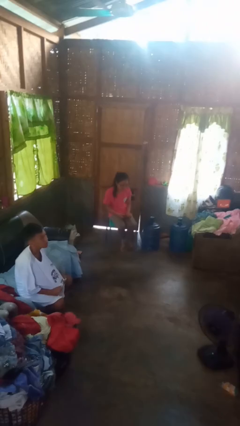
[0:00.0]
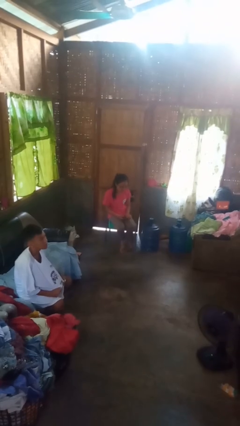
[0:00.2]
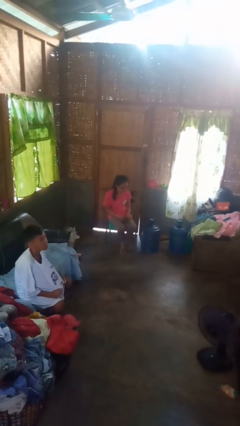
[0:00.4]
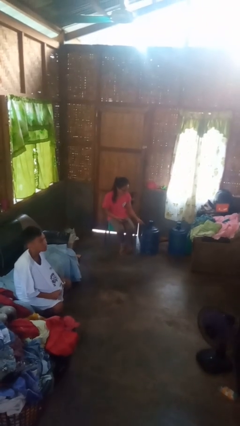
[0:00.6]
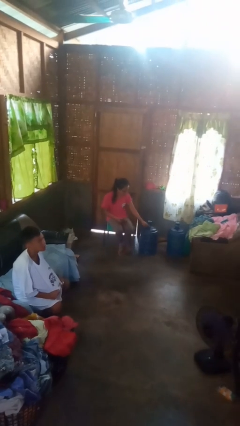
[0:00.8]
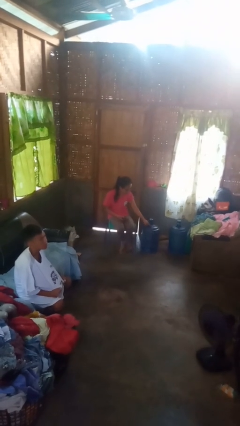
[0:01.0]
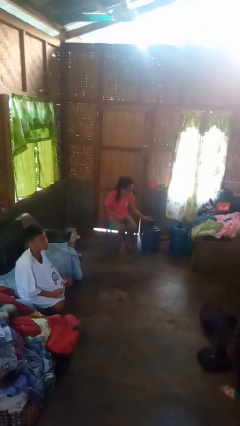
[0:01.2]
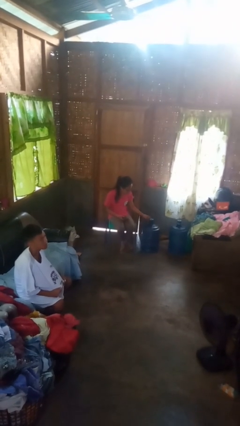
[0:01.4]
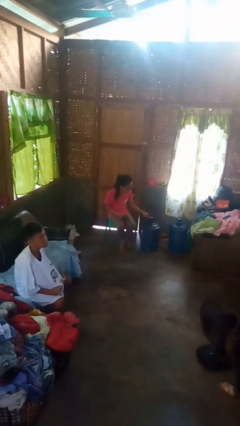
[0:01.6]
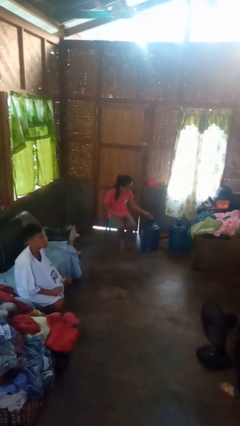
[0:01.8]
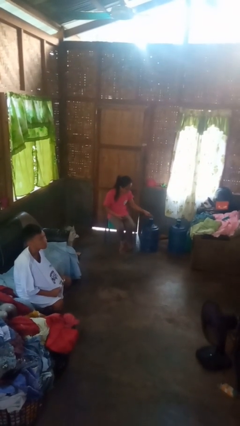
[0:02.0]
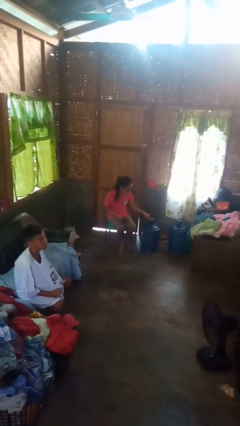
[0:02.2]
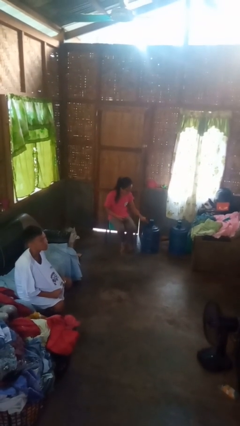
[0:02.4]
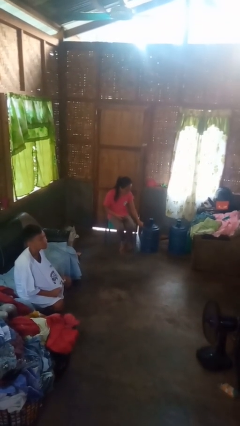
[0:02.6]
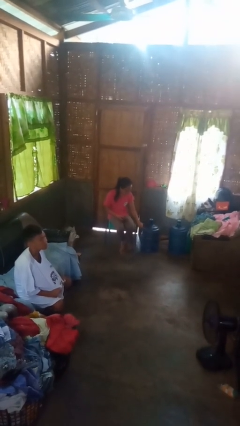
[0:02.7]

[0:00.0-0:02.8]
person taps object with finger

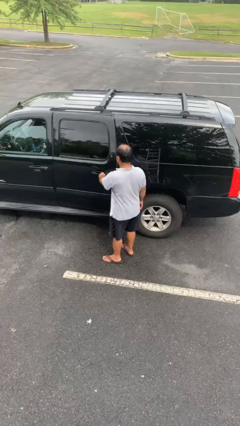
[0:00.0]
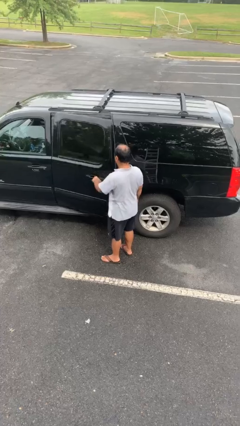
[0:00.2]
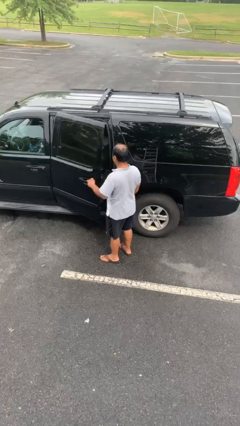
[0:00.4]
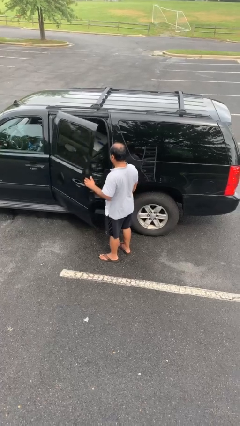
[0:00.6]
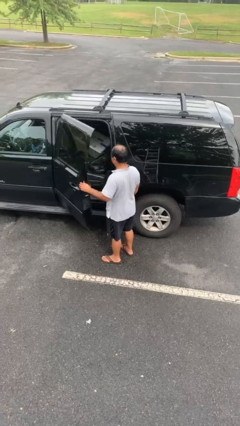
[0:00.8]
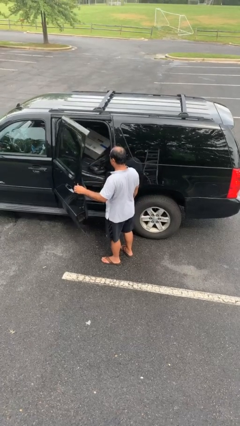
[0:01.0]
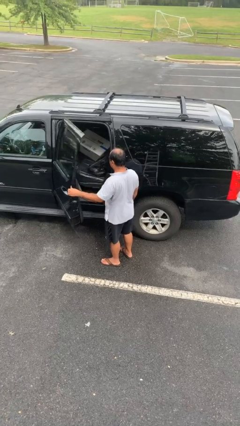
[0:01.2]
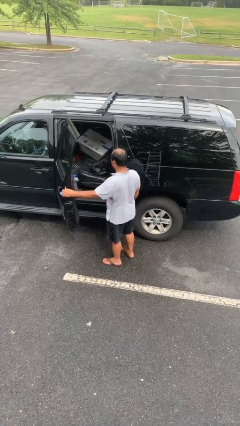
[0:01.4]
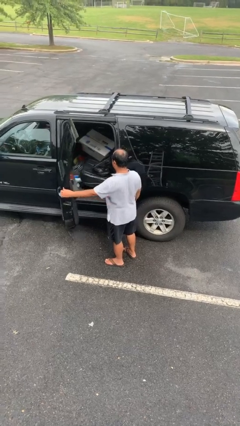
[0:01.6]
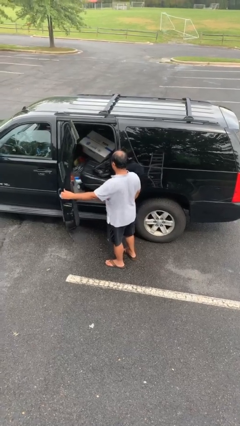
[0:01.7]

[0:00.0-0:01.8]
person opens car door

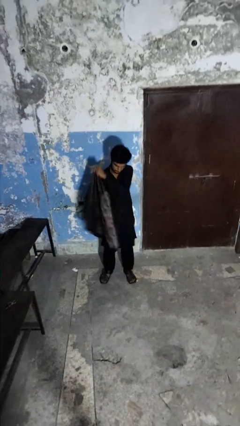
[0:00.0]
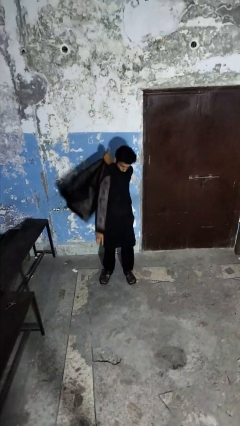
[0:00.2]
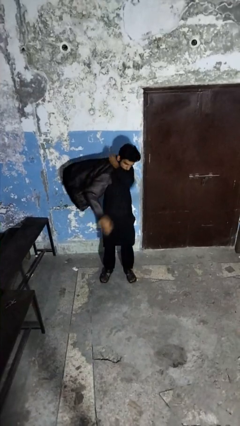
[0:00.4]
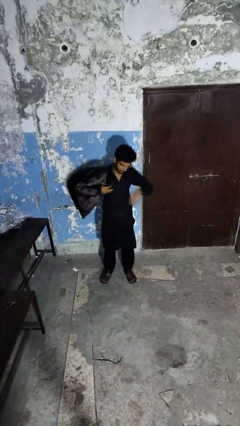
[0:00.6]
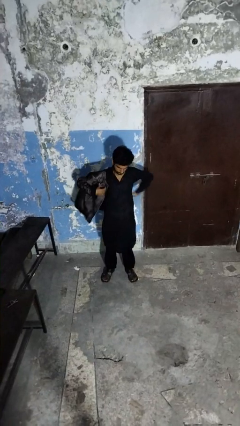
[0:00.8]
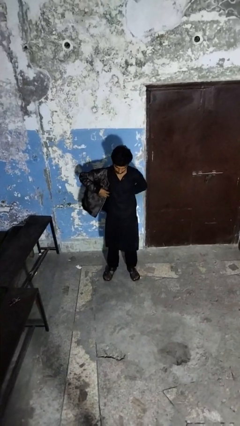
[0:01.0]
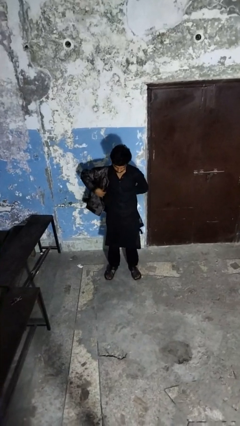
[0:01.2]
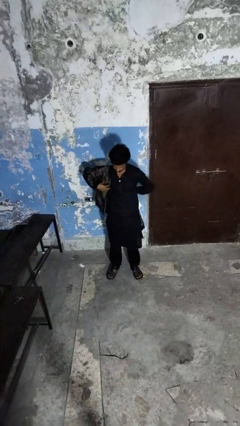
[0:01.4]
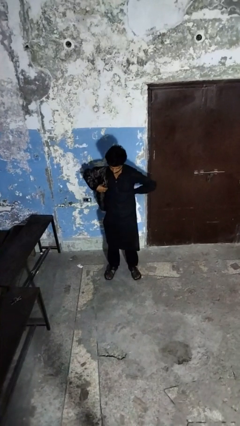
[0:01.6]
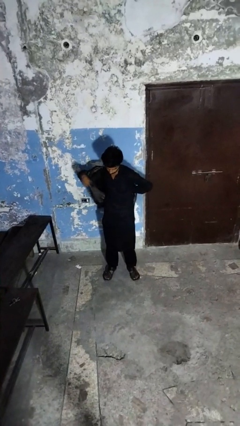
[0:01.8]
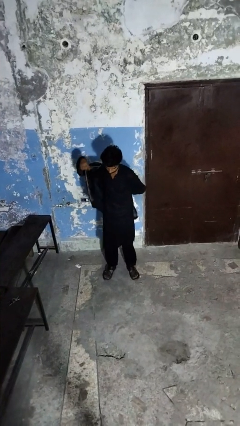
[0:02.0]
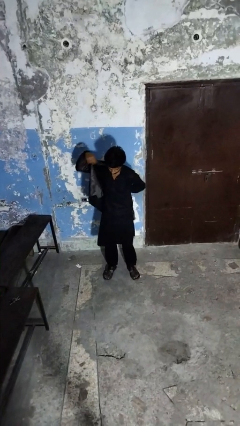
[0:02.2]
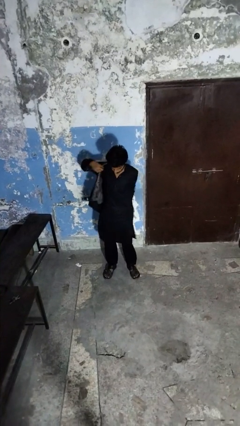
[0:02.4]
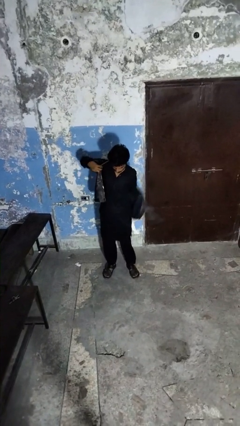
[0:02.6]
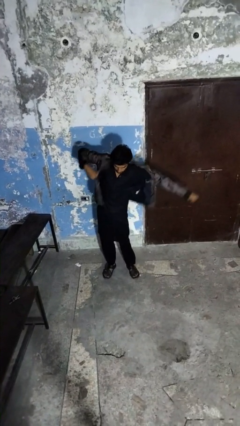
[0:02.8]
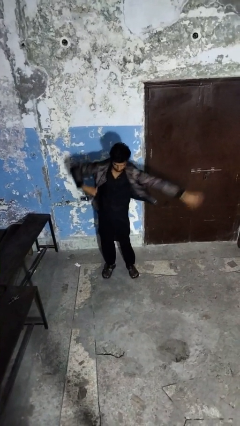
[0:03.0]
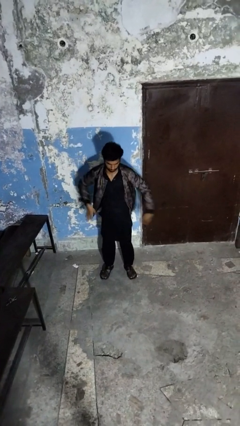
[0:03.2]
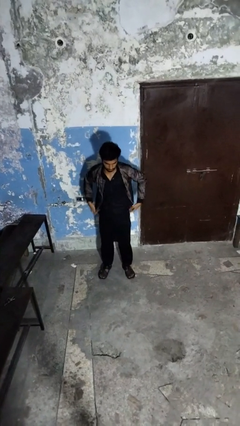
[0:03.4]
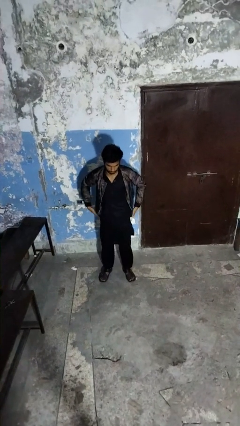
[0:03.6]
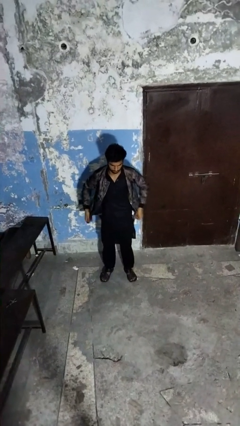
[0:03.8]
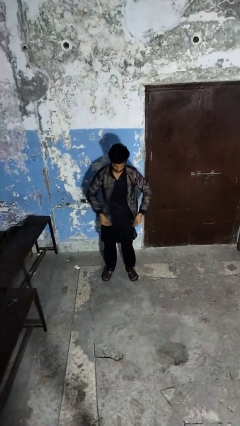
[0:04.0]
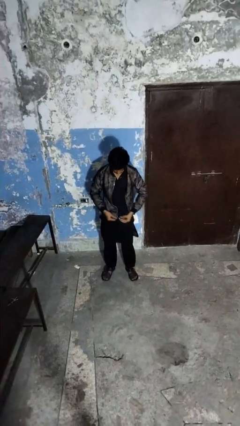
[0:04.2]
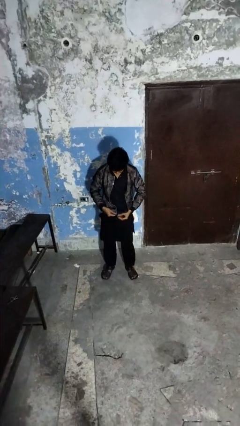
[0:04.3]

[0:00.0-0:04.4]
person puts on jacket

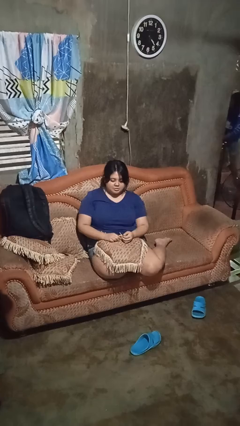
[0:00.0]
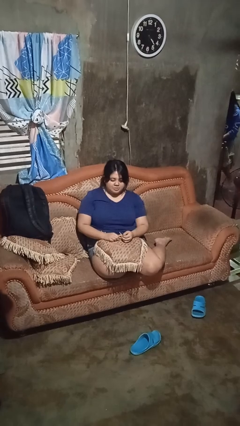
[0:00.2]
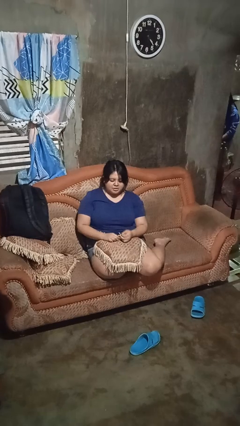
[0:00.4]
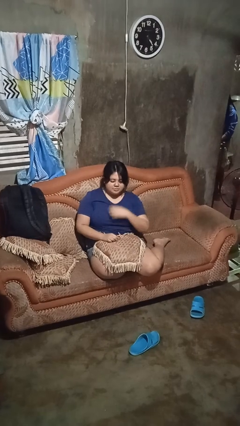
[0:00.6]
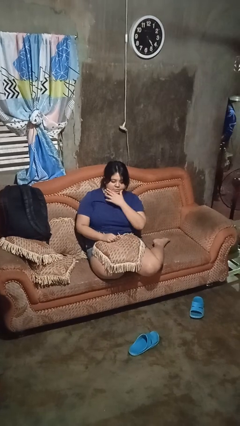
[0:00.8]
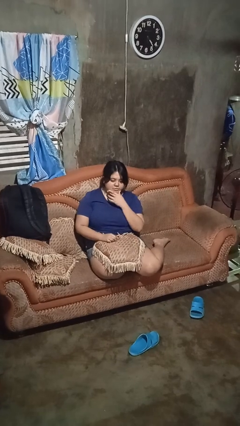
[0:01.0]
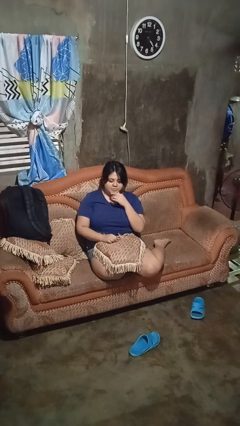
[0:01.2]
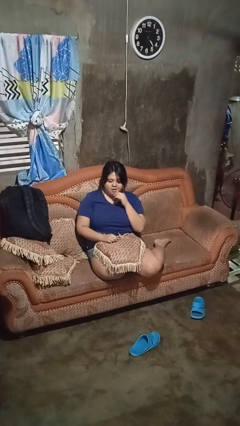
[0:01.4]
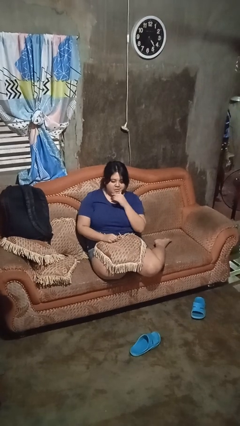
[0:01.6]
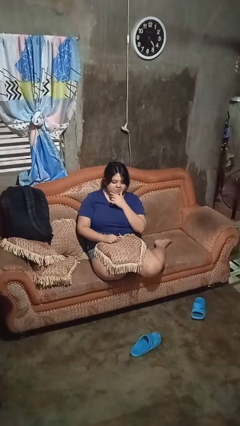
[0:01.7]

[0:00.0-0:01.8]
person strokes chin

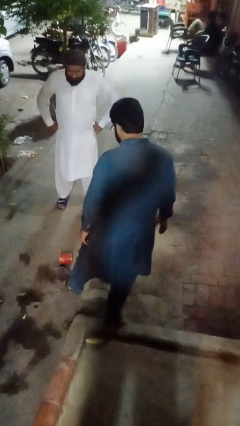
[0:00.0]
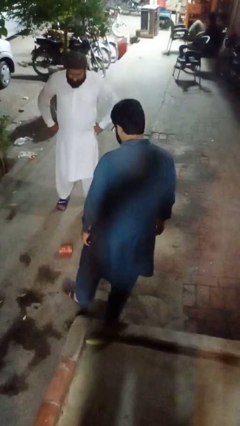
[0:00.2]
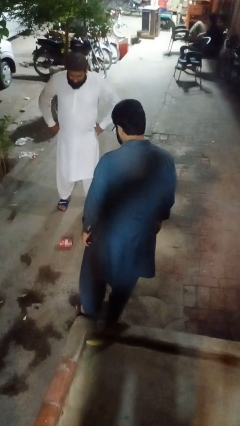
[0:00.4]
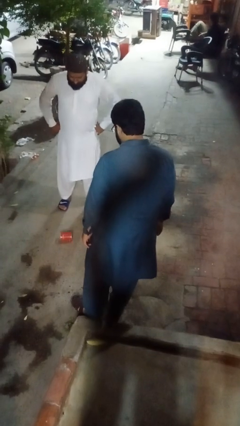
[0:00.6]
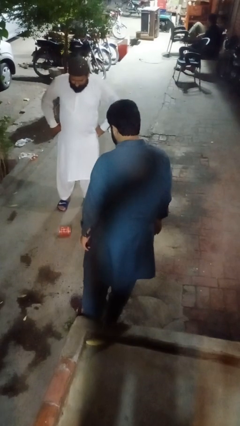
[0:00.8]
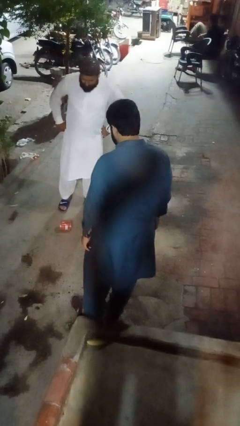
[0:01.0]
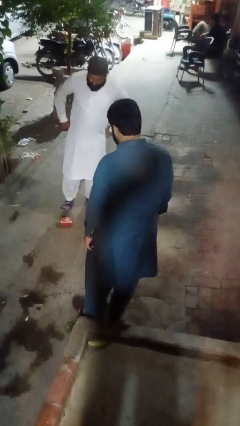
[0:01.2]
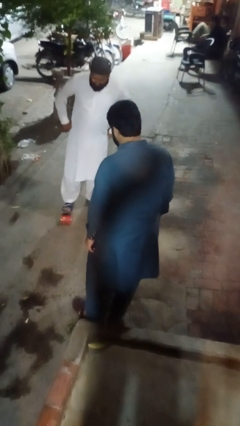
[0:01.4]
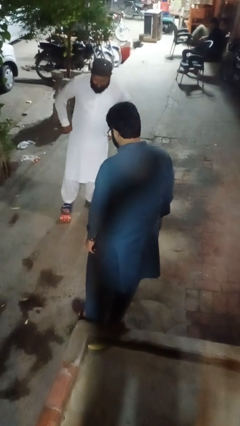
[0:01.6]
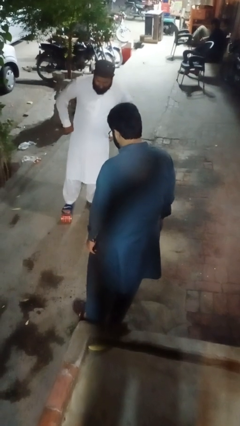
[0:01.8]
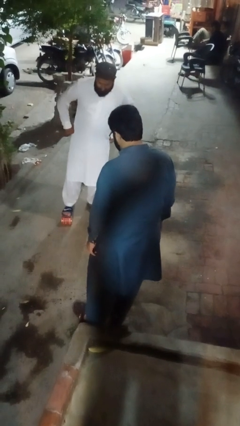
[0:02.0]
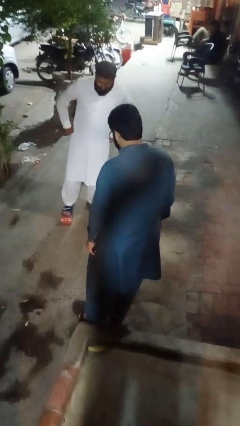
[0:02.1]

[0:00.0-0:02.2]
person kicks object to person

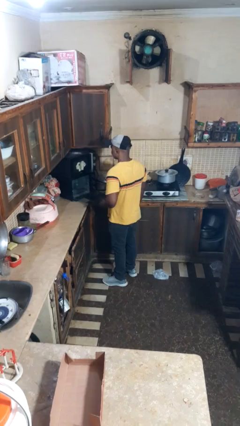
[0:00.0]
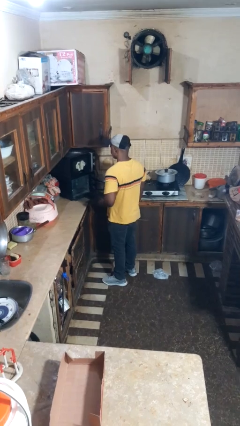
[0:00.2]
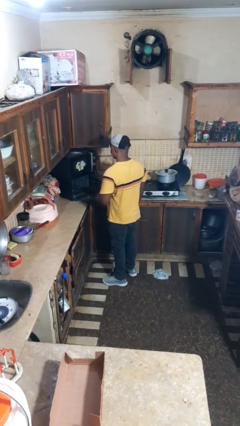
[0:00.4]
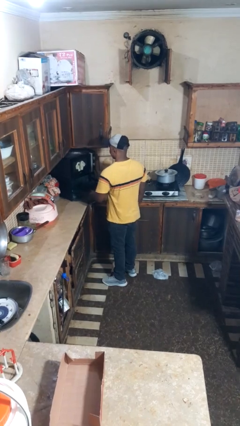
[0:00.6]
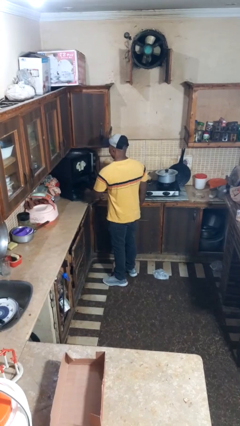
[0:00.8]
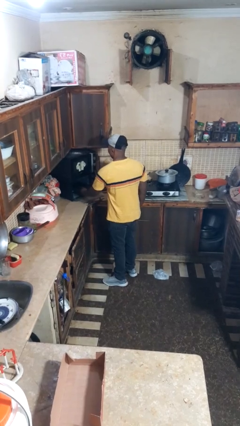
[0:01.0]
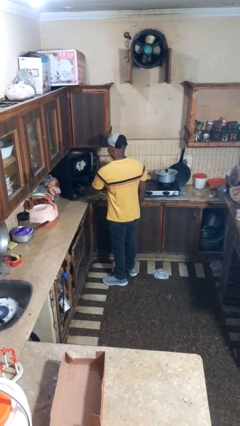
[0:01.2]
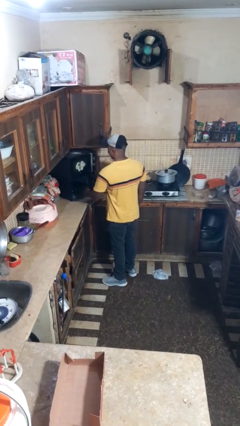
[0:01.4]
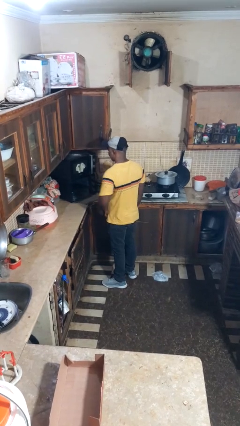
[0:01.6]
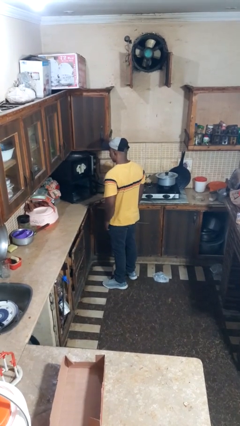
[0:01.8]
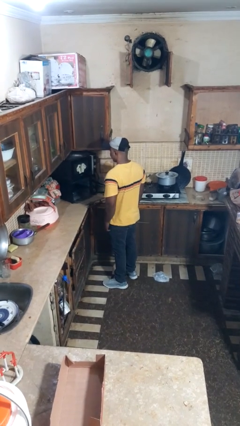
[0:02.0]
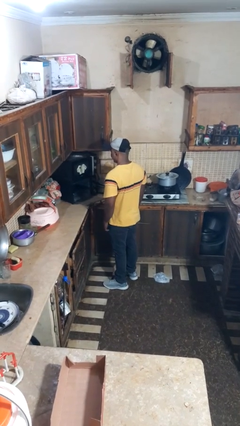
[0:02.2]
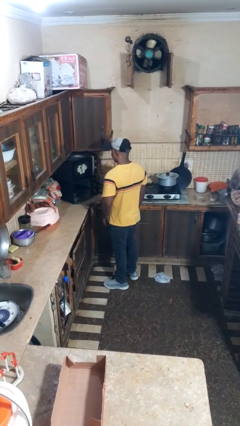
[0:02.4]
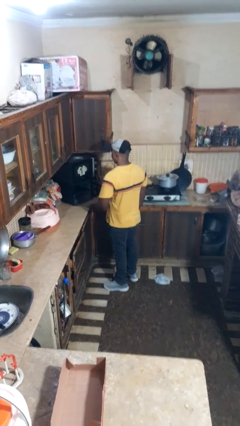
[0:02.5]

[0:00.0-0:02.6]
person puts object into oven

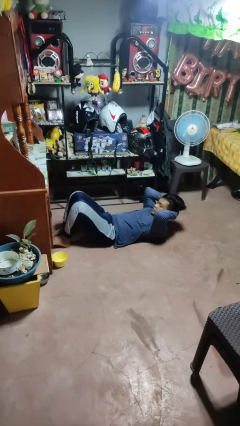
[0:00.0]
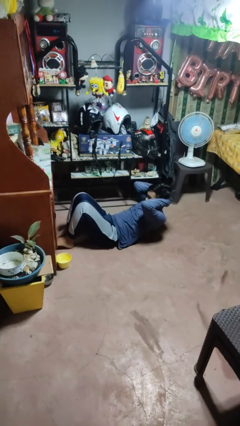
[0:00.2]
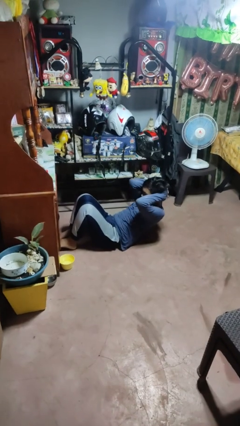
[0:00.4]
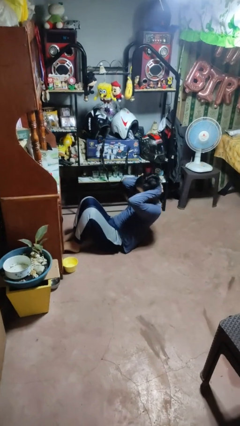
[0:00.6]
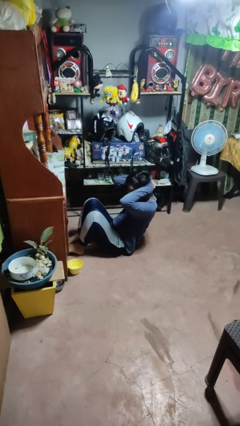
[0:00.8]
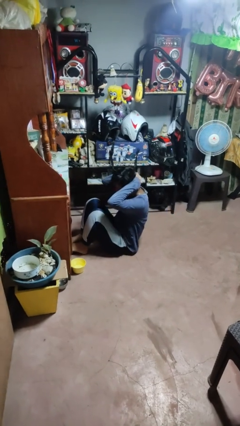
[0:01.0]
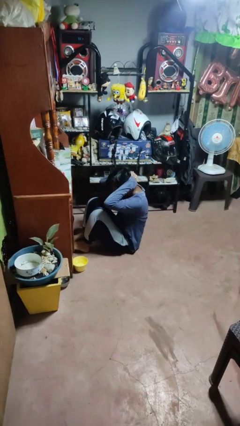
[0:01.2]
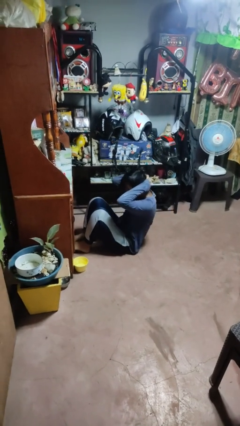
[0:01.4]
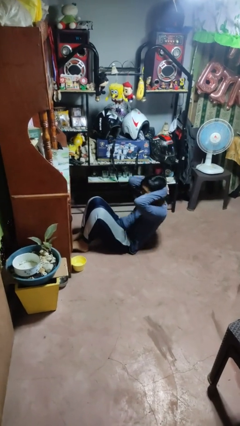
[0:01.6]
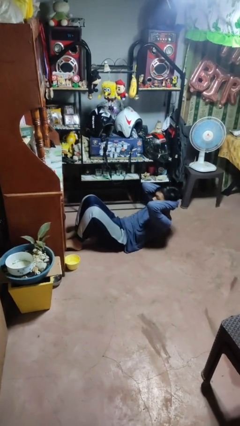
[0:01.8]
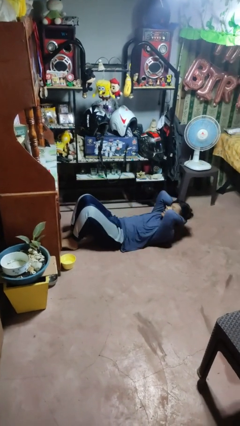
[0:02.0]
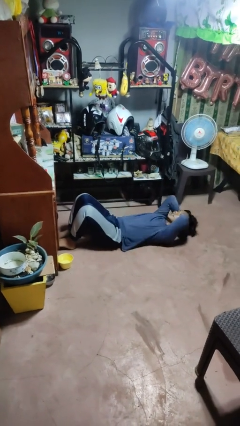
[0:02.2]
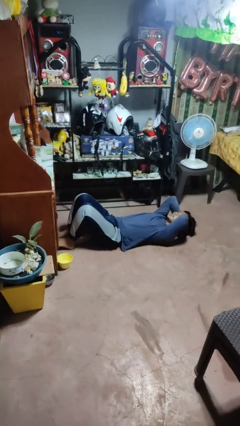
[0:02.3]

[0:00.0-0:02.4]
person exercises with situp
